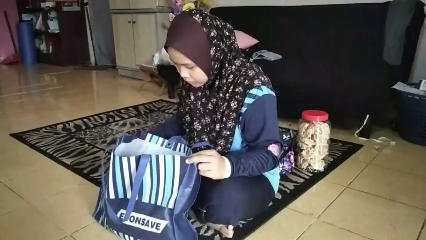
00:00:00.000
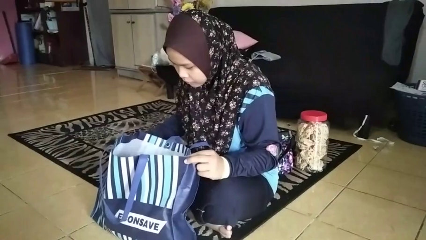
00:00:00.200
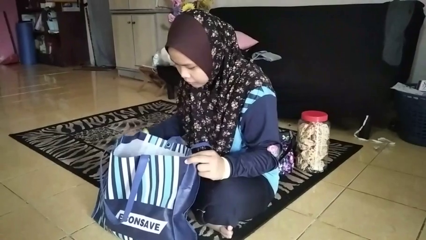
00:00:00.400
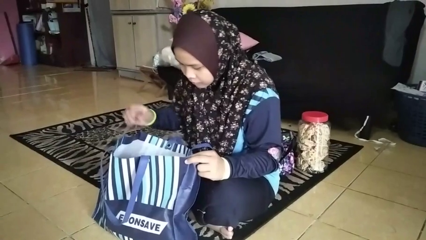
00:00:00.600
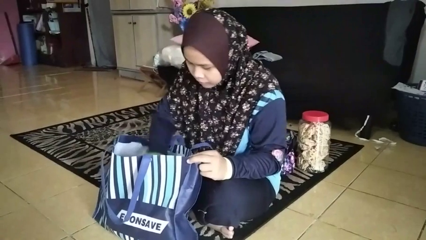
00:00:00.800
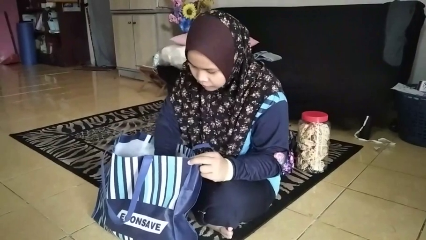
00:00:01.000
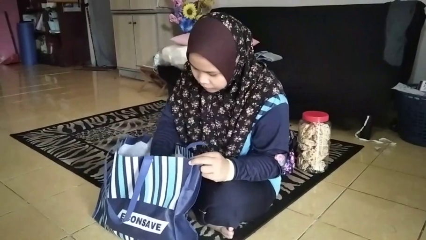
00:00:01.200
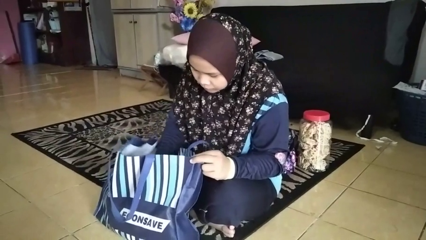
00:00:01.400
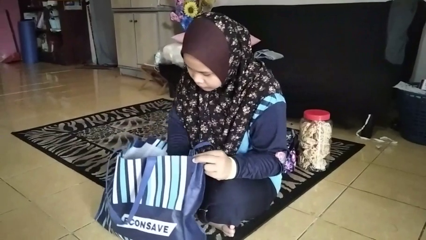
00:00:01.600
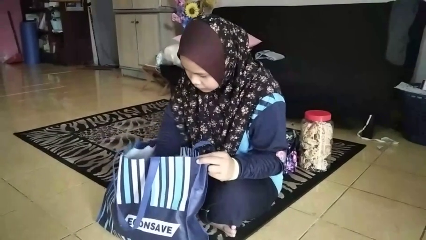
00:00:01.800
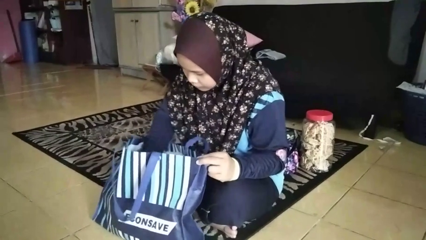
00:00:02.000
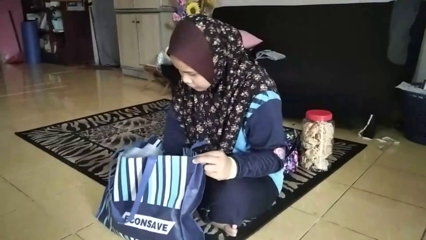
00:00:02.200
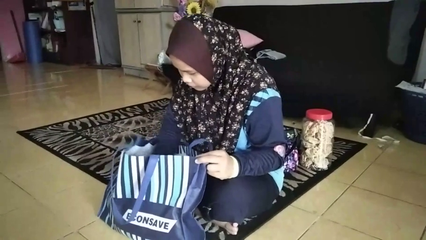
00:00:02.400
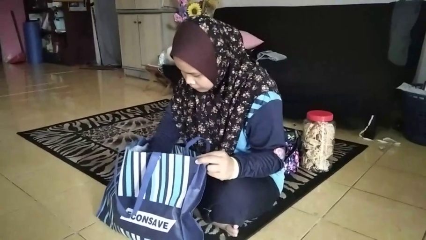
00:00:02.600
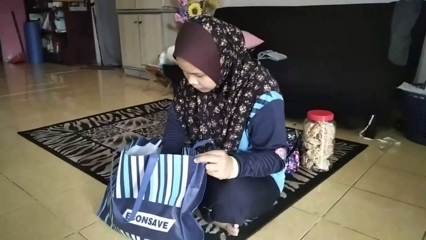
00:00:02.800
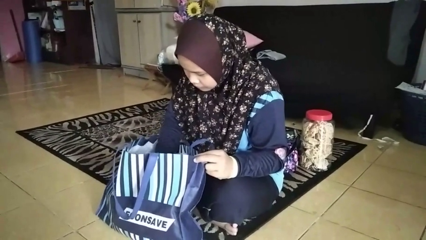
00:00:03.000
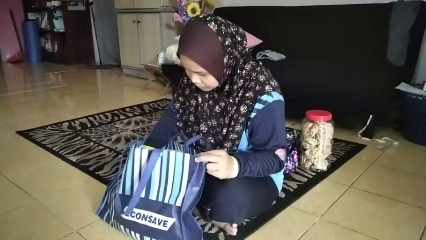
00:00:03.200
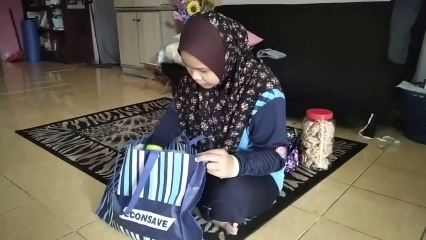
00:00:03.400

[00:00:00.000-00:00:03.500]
person searches in bag

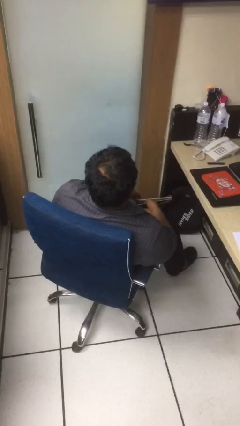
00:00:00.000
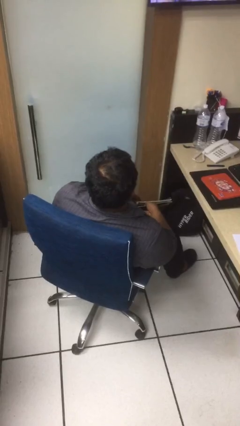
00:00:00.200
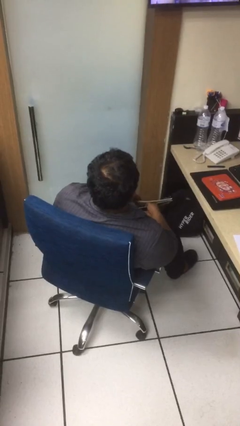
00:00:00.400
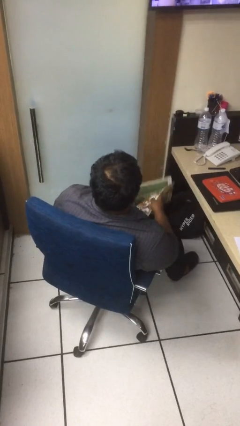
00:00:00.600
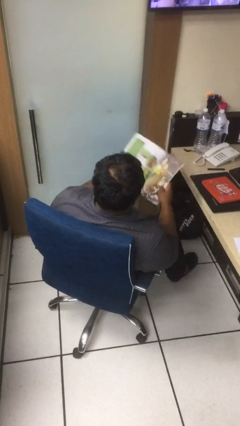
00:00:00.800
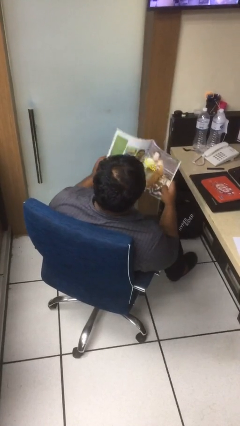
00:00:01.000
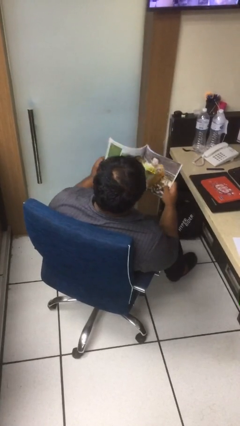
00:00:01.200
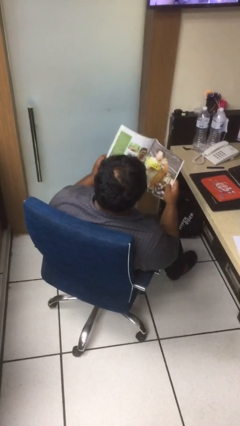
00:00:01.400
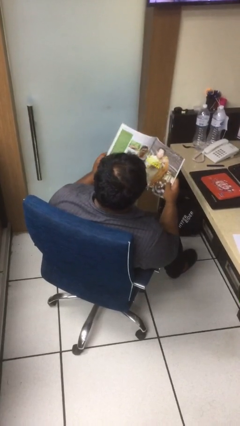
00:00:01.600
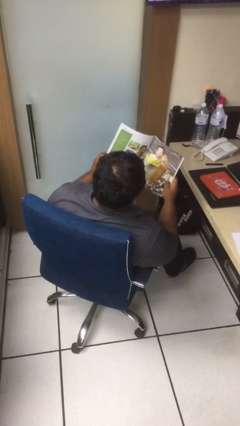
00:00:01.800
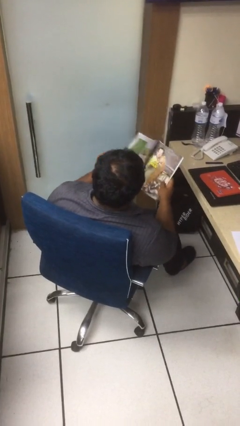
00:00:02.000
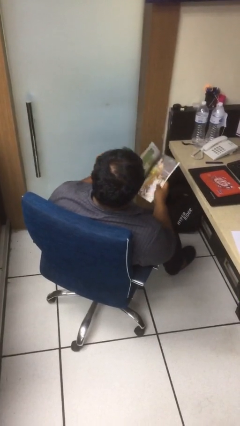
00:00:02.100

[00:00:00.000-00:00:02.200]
person reads magazine

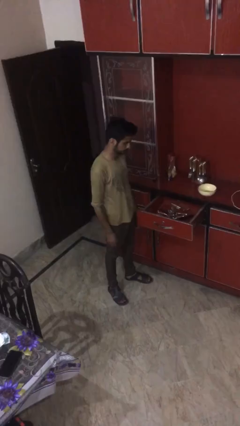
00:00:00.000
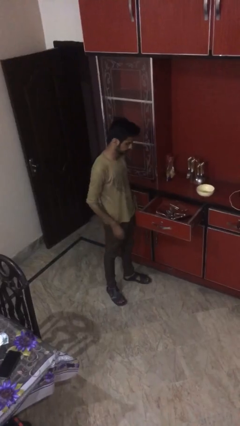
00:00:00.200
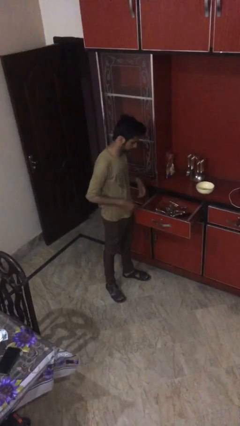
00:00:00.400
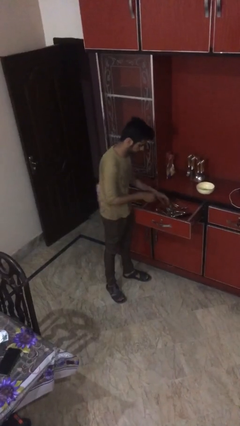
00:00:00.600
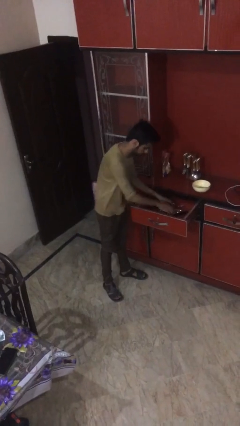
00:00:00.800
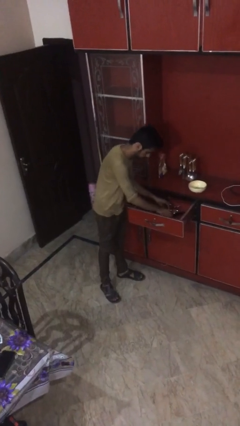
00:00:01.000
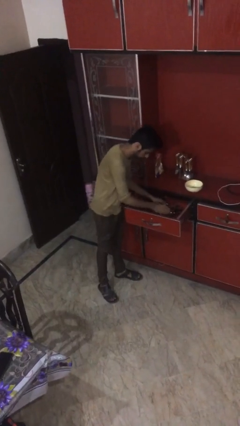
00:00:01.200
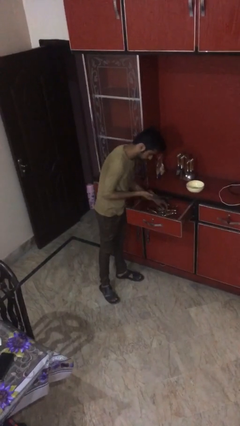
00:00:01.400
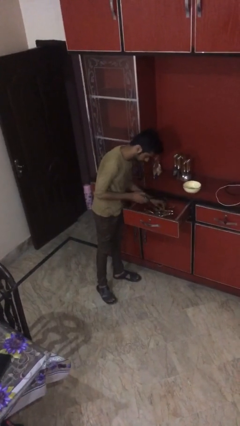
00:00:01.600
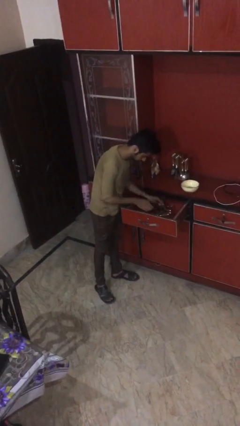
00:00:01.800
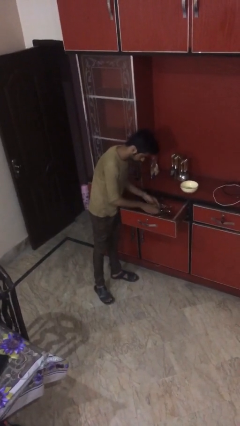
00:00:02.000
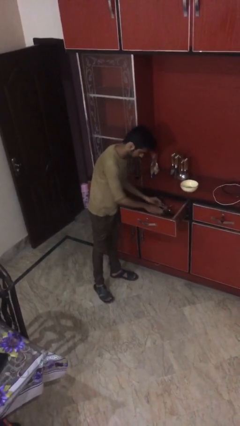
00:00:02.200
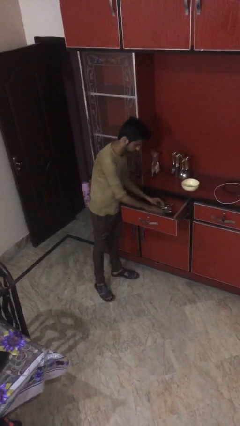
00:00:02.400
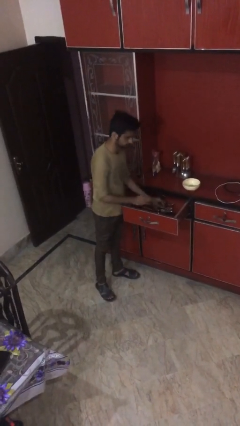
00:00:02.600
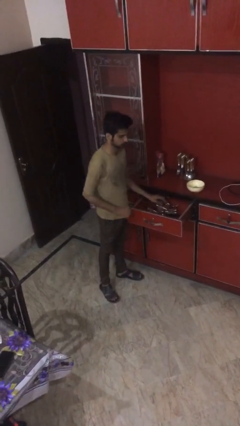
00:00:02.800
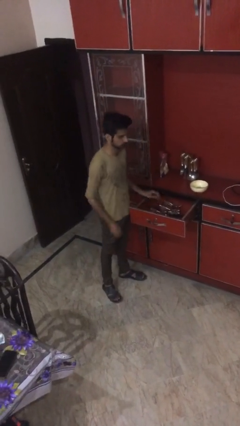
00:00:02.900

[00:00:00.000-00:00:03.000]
person searches in kitchen drawer

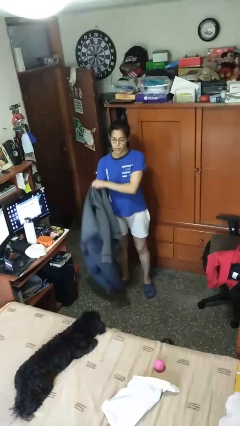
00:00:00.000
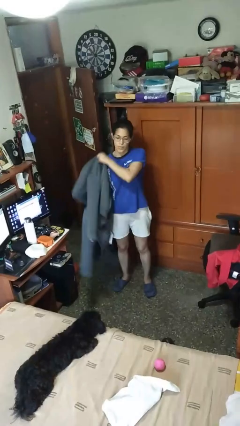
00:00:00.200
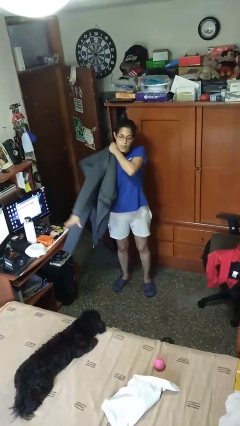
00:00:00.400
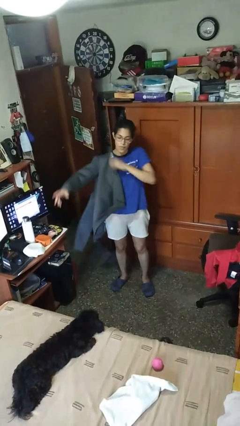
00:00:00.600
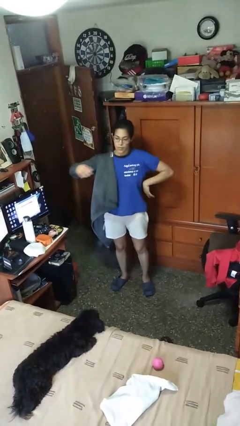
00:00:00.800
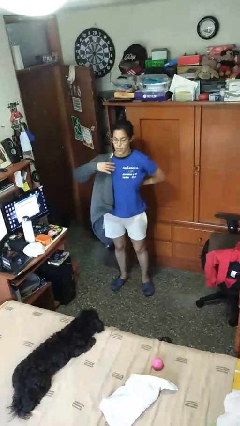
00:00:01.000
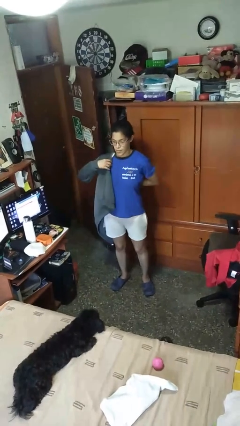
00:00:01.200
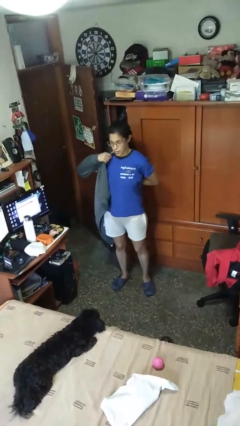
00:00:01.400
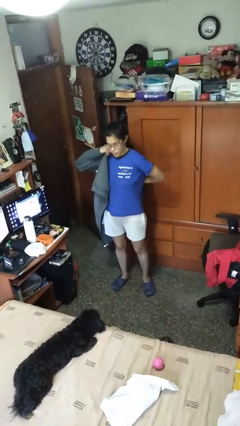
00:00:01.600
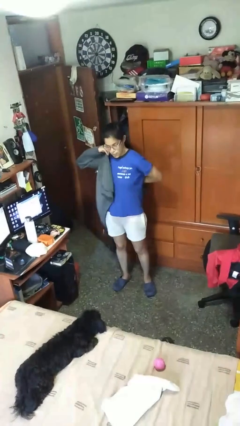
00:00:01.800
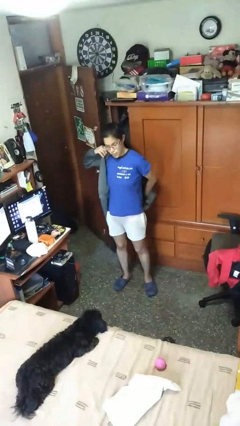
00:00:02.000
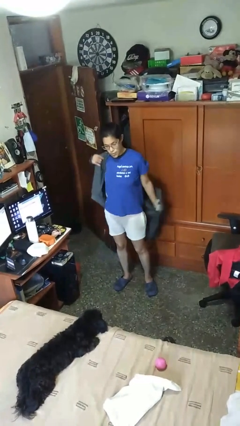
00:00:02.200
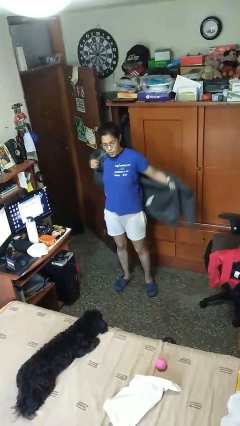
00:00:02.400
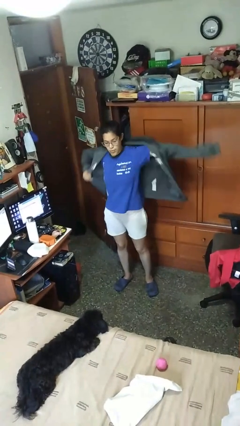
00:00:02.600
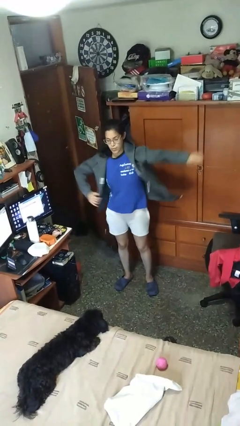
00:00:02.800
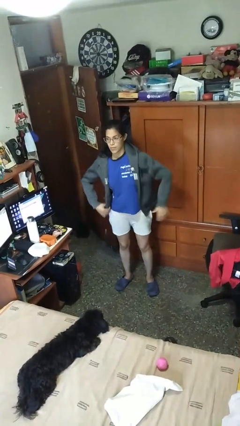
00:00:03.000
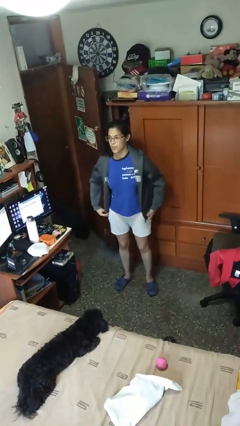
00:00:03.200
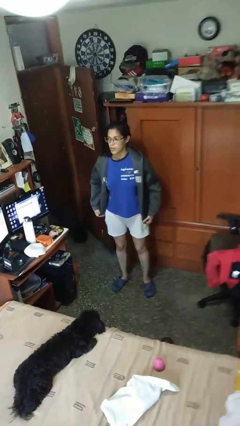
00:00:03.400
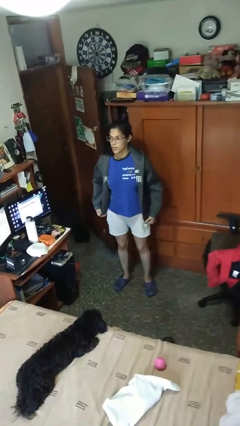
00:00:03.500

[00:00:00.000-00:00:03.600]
person puts on jacket

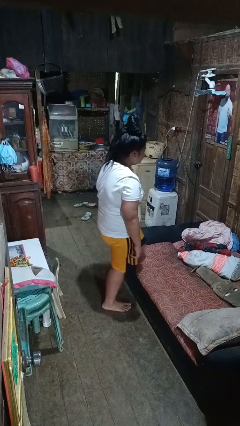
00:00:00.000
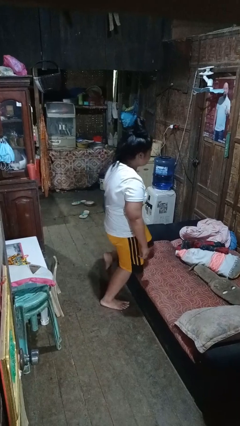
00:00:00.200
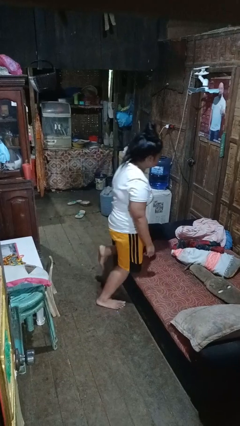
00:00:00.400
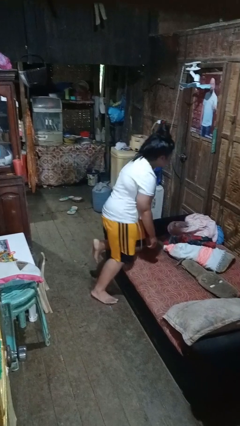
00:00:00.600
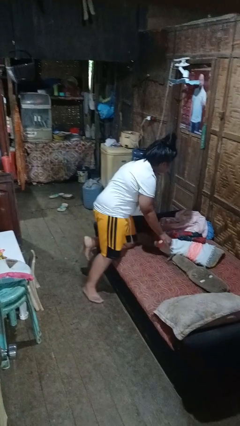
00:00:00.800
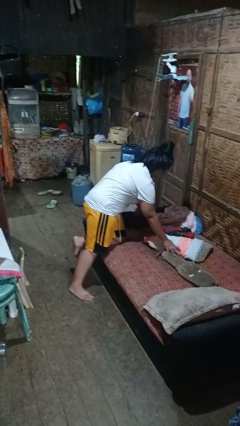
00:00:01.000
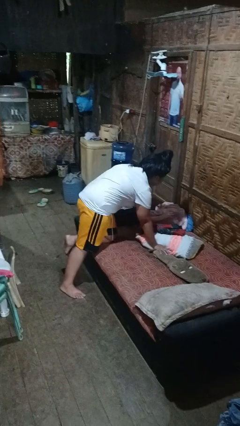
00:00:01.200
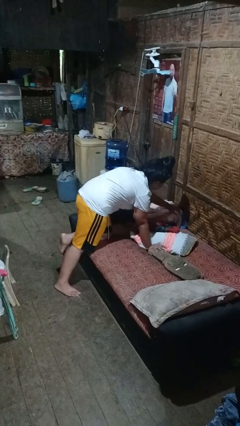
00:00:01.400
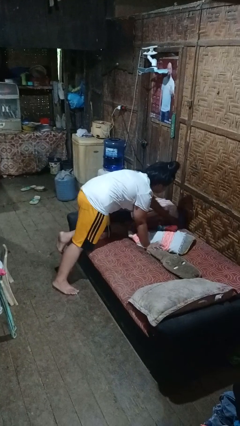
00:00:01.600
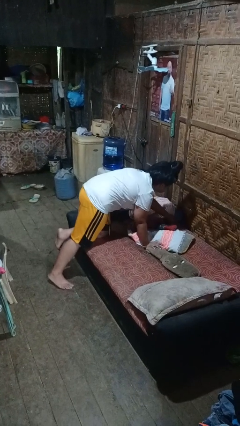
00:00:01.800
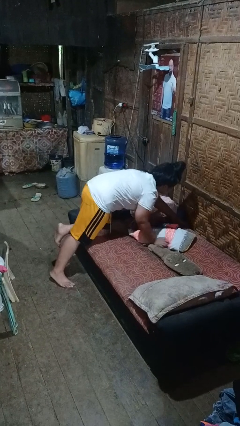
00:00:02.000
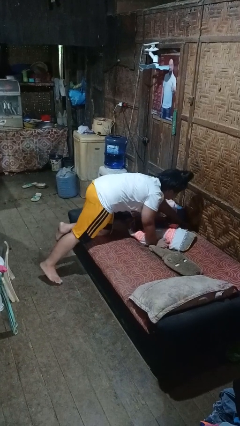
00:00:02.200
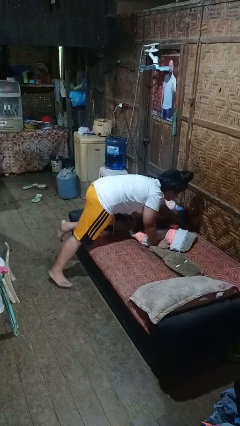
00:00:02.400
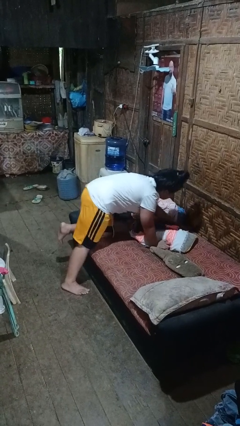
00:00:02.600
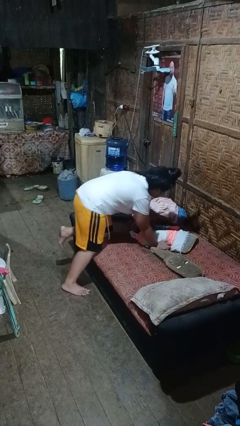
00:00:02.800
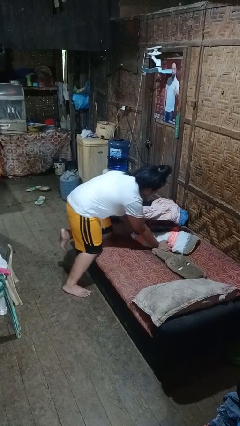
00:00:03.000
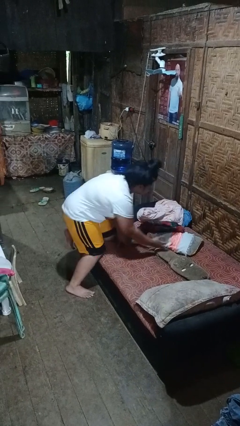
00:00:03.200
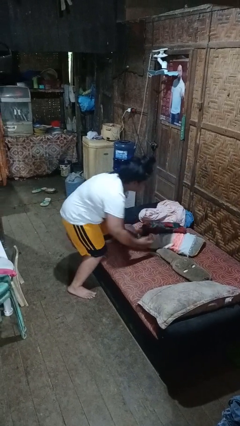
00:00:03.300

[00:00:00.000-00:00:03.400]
person searches in couch

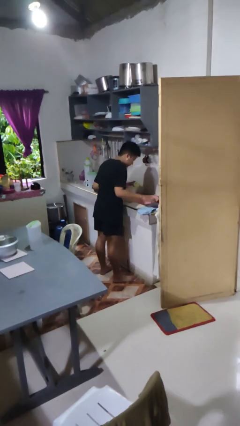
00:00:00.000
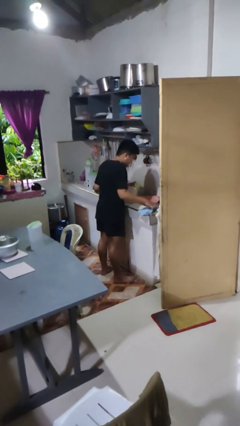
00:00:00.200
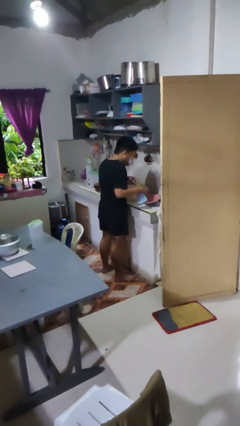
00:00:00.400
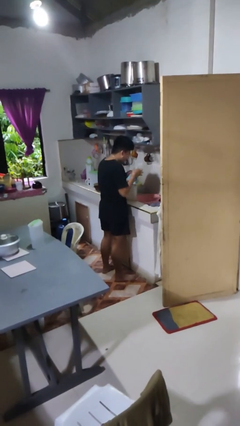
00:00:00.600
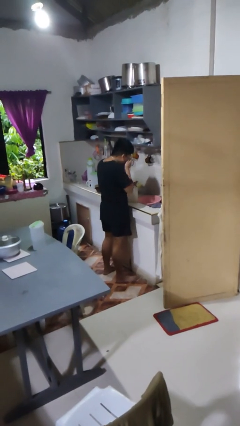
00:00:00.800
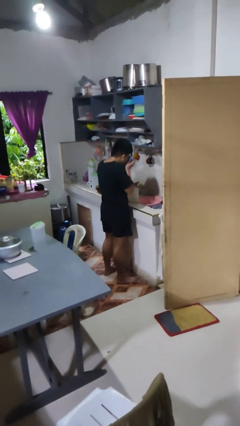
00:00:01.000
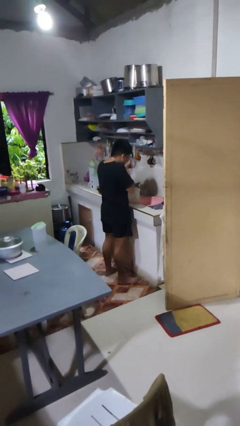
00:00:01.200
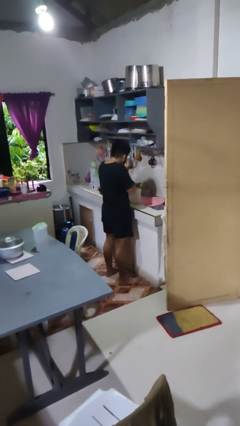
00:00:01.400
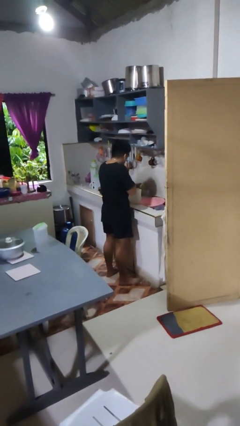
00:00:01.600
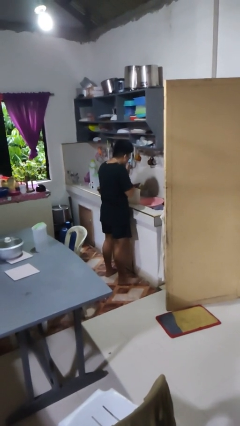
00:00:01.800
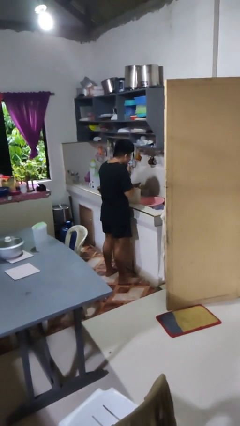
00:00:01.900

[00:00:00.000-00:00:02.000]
person dries face with towel
